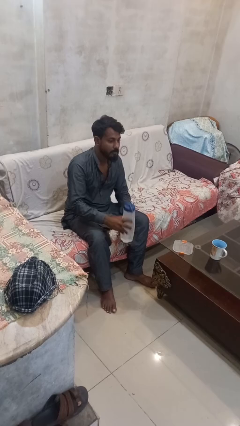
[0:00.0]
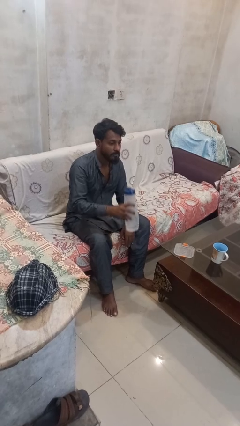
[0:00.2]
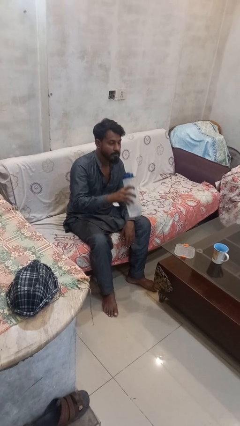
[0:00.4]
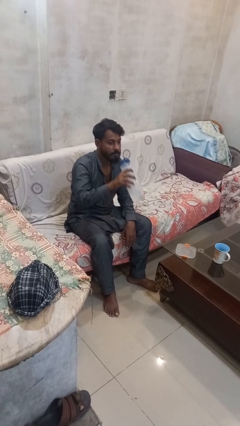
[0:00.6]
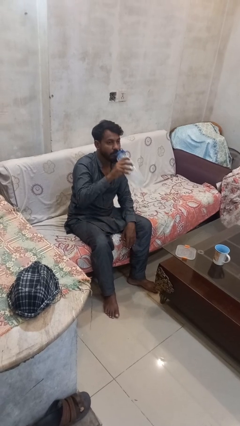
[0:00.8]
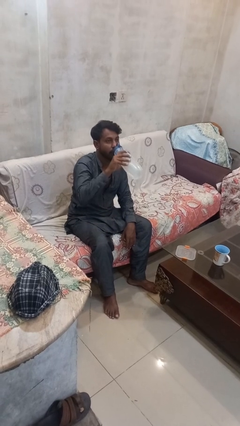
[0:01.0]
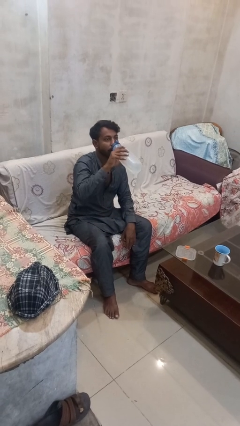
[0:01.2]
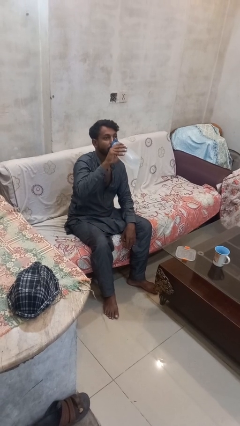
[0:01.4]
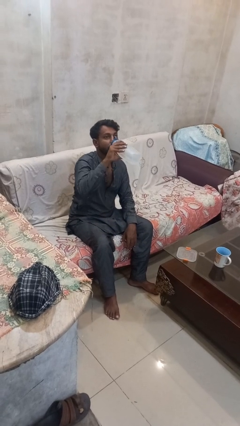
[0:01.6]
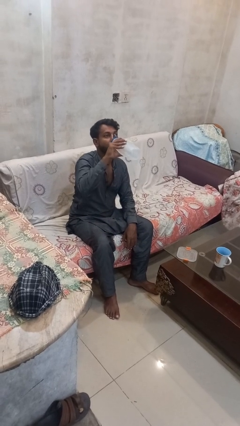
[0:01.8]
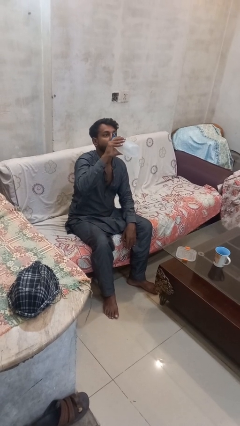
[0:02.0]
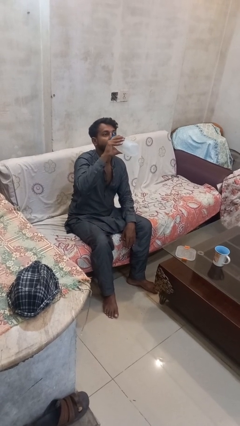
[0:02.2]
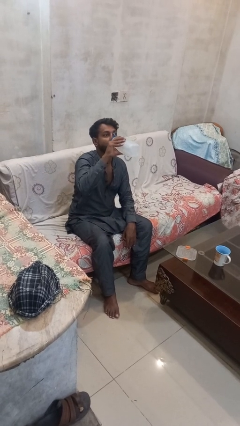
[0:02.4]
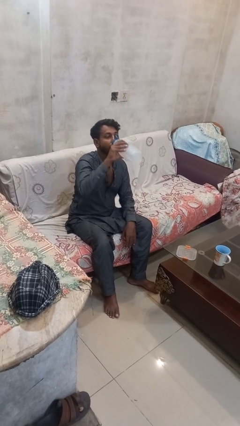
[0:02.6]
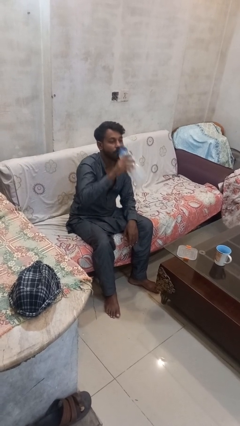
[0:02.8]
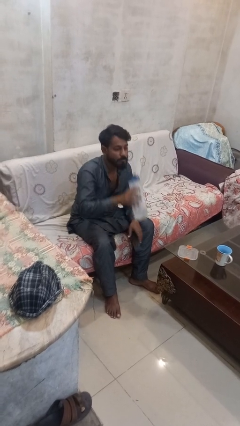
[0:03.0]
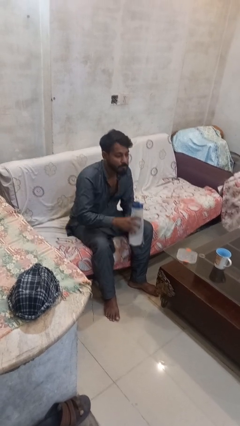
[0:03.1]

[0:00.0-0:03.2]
person drinks from bottle

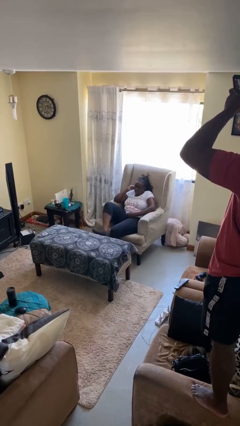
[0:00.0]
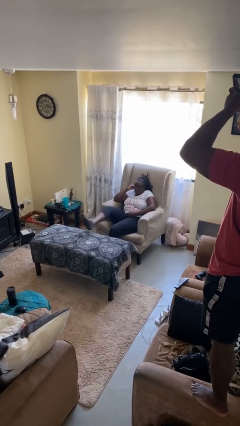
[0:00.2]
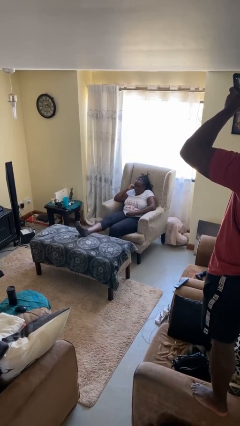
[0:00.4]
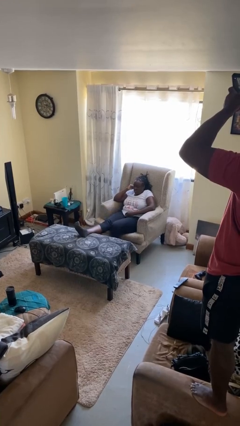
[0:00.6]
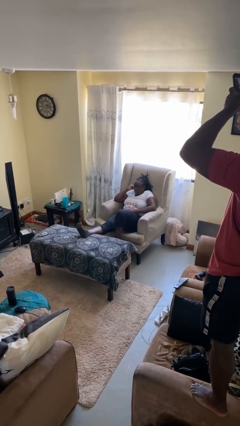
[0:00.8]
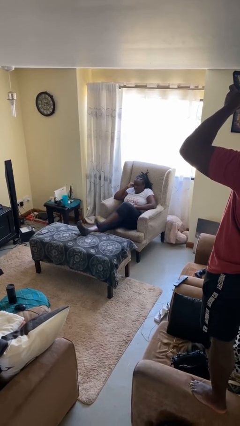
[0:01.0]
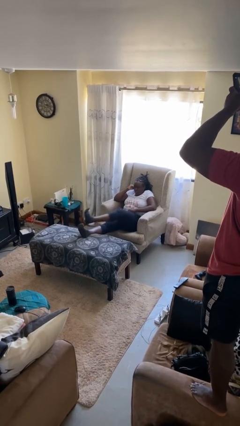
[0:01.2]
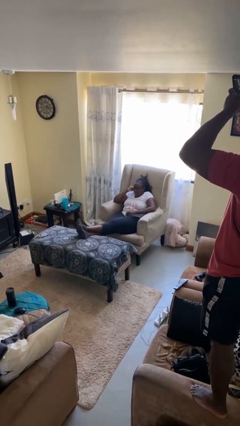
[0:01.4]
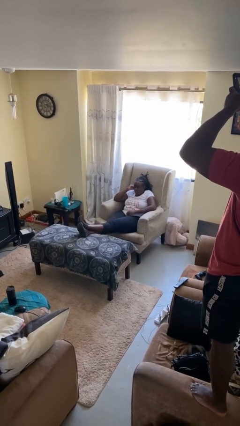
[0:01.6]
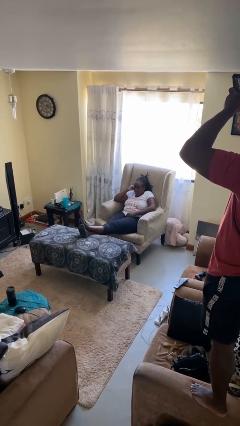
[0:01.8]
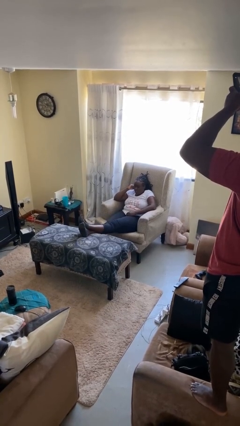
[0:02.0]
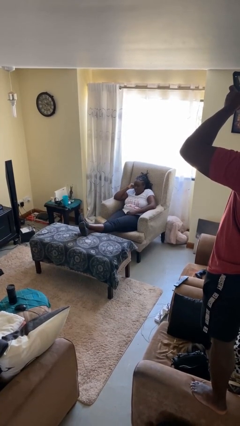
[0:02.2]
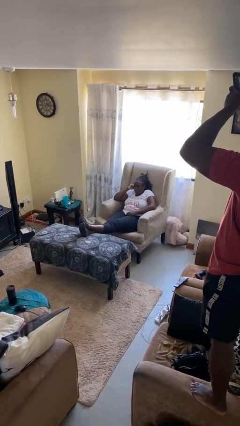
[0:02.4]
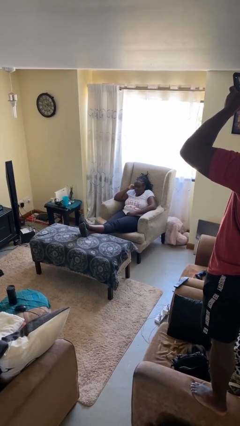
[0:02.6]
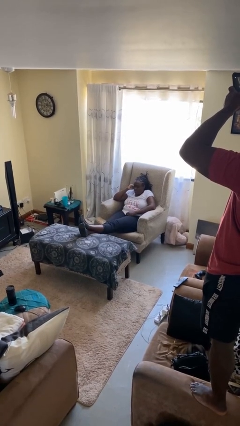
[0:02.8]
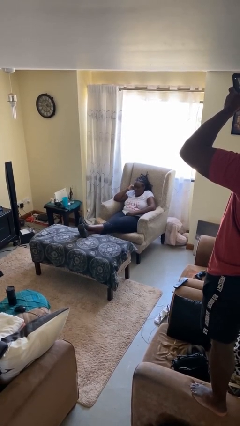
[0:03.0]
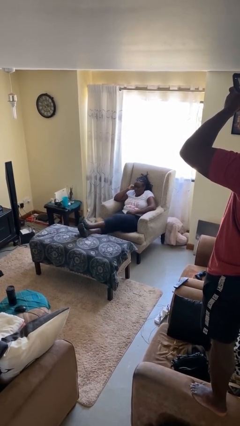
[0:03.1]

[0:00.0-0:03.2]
person puts feet up

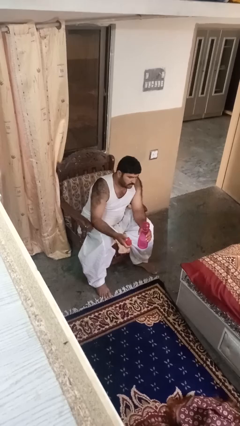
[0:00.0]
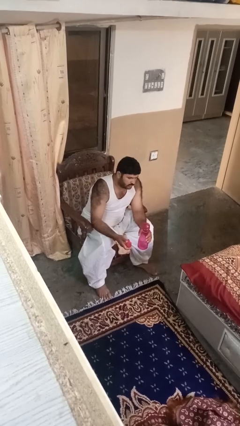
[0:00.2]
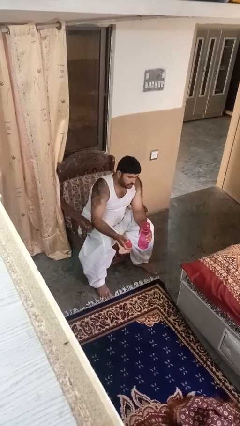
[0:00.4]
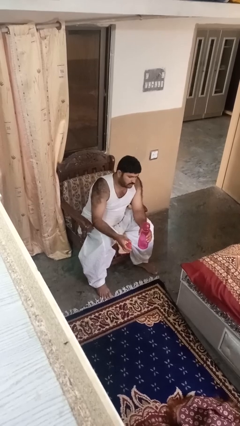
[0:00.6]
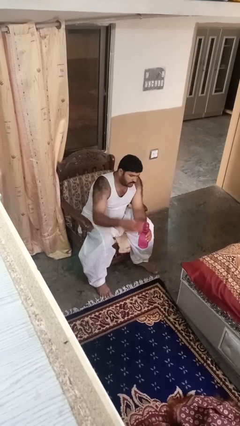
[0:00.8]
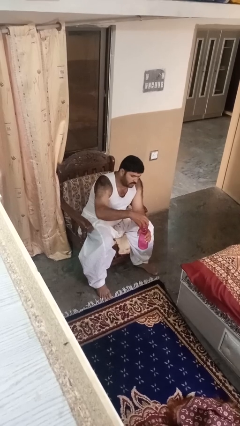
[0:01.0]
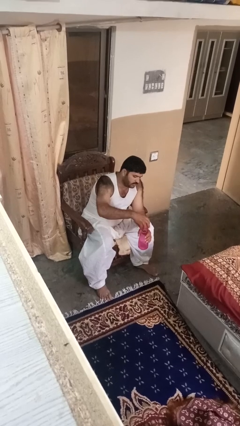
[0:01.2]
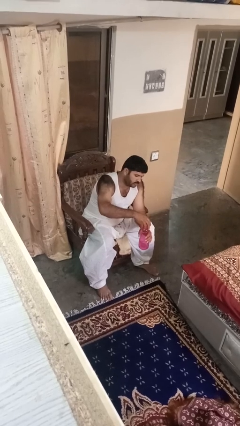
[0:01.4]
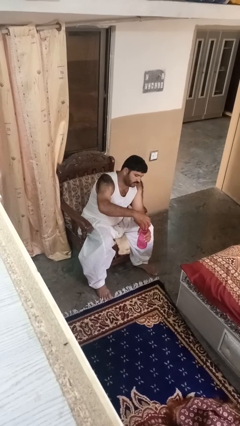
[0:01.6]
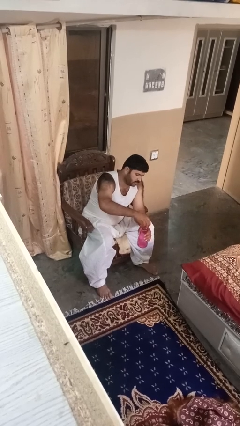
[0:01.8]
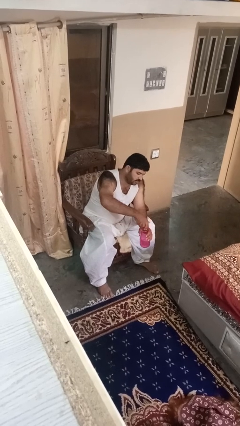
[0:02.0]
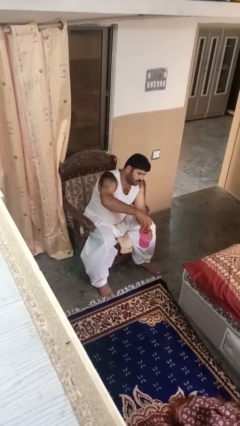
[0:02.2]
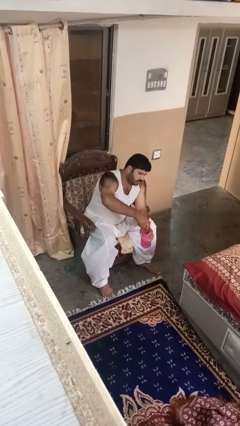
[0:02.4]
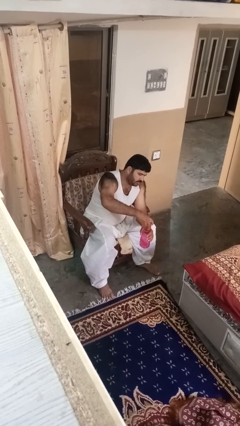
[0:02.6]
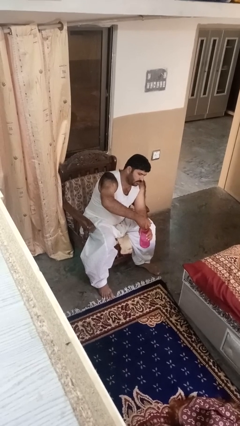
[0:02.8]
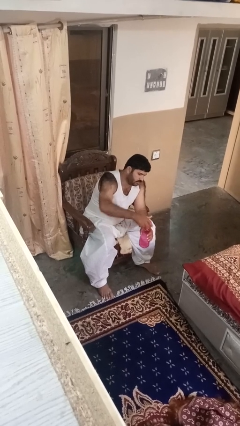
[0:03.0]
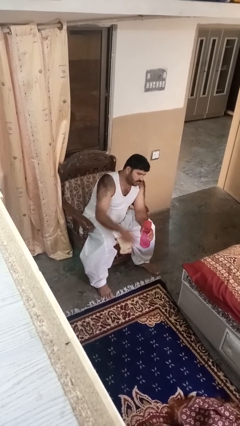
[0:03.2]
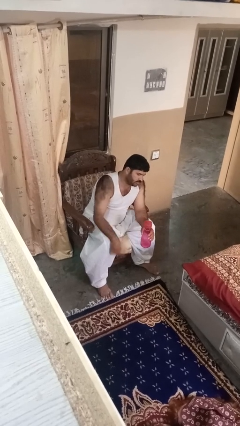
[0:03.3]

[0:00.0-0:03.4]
person screws lid to bottle

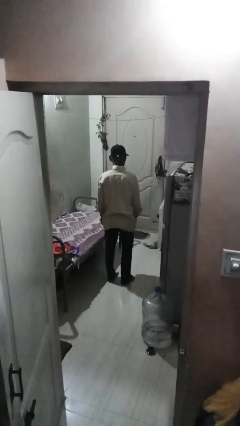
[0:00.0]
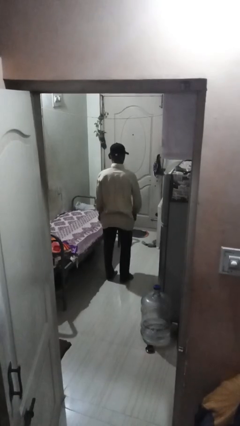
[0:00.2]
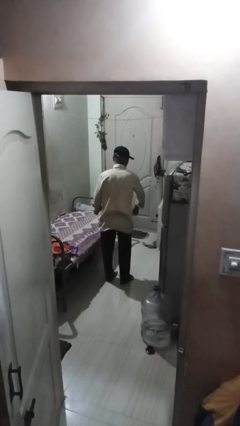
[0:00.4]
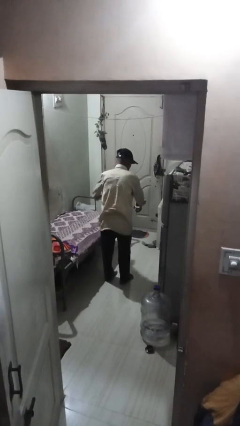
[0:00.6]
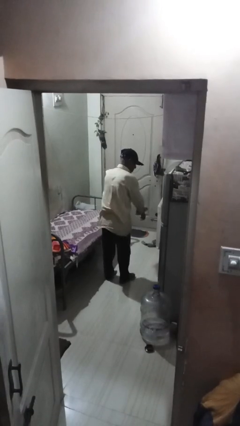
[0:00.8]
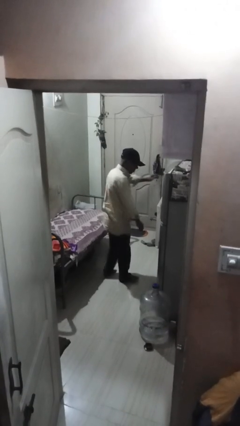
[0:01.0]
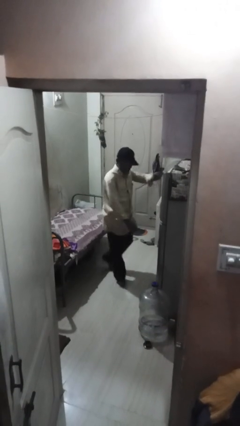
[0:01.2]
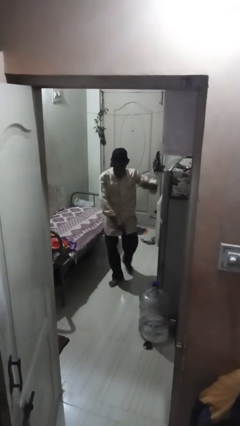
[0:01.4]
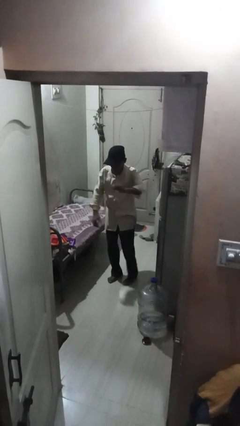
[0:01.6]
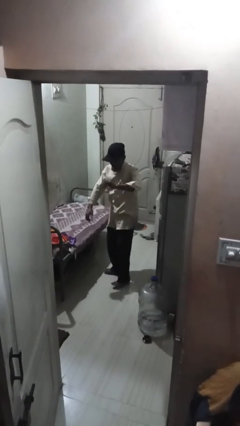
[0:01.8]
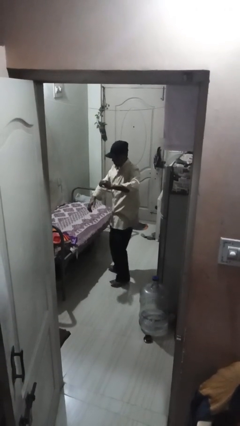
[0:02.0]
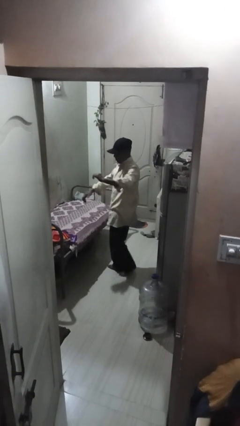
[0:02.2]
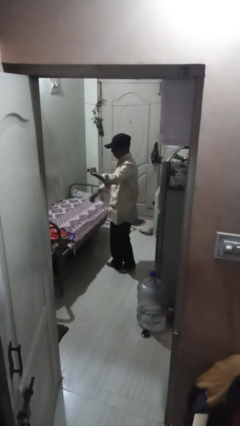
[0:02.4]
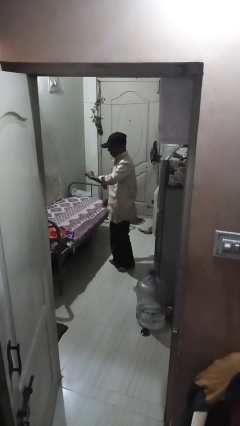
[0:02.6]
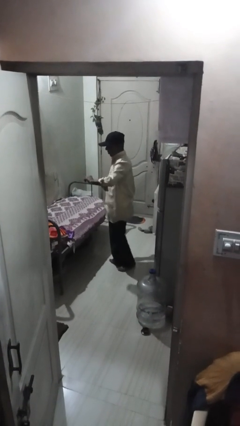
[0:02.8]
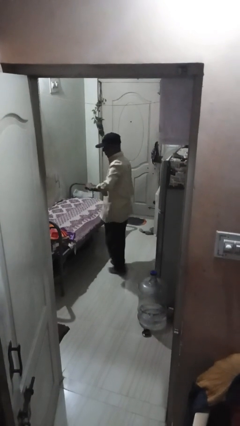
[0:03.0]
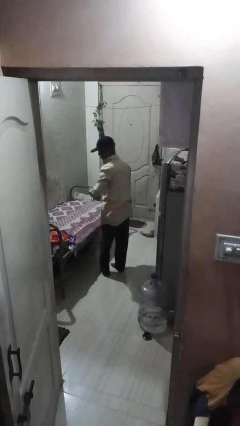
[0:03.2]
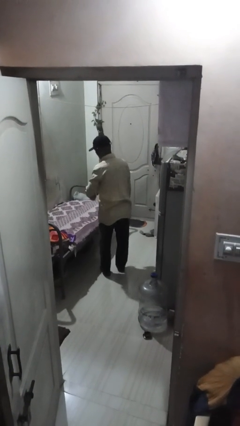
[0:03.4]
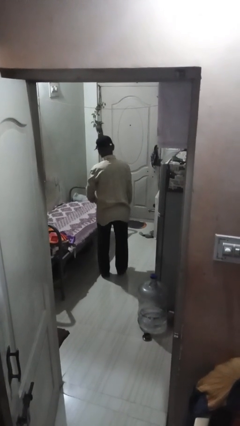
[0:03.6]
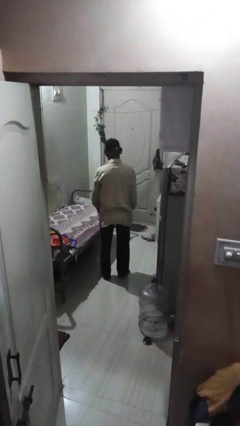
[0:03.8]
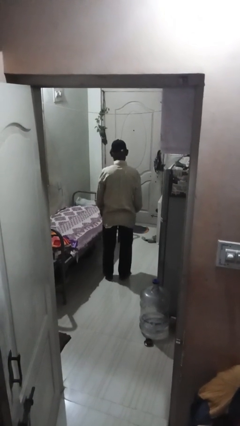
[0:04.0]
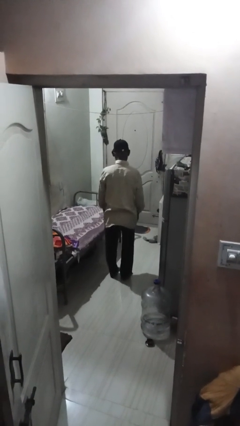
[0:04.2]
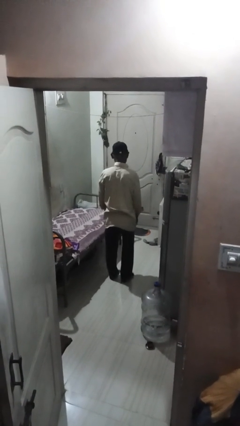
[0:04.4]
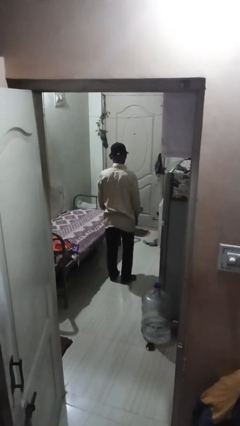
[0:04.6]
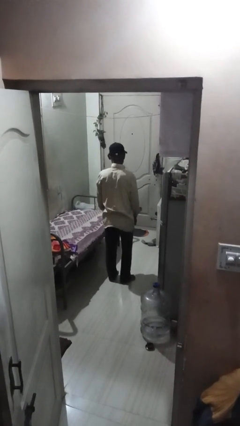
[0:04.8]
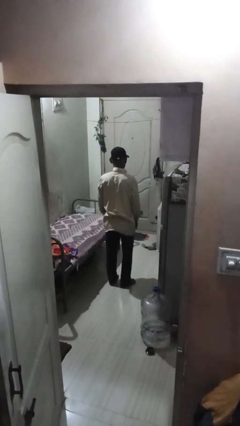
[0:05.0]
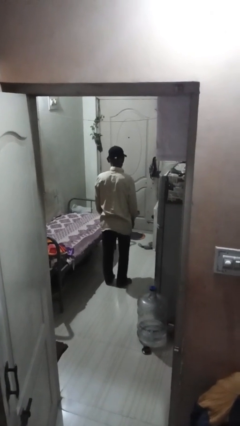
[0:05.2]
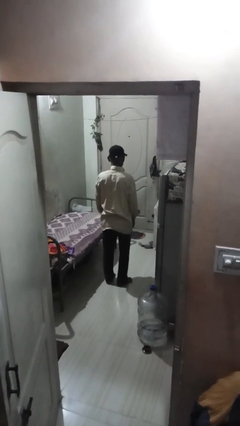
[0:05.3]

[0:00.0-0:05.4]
person twirls

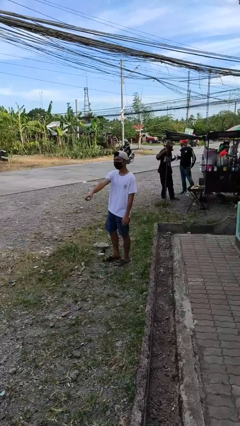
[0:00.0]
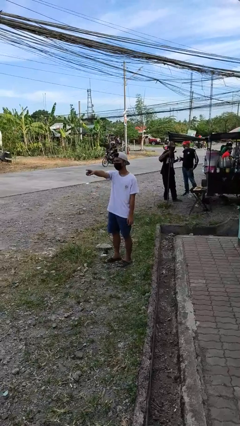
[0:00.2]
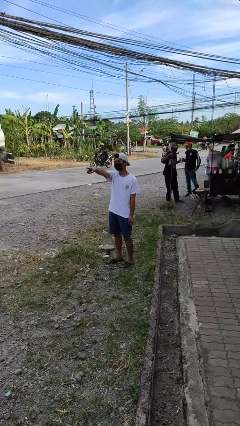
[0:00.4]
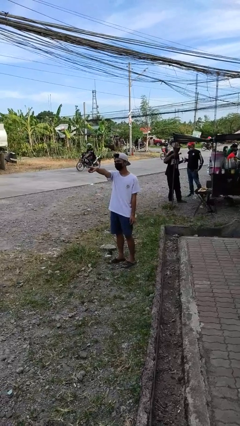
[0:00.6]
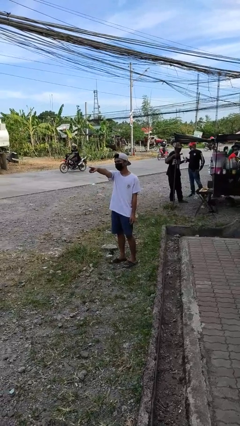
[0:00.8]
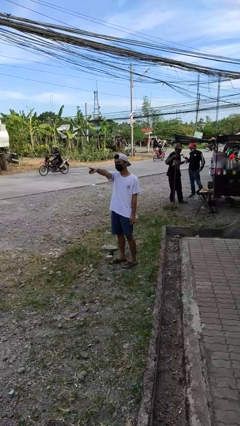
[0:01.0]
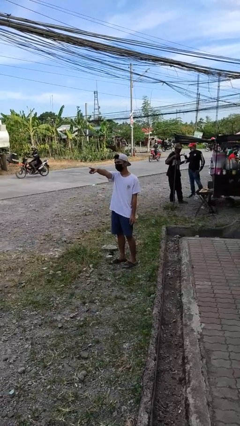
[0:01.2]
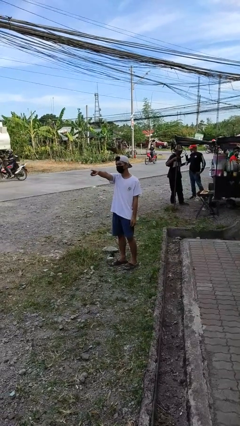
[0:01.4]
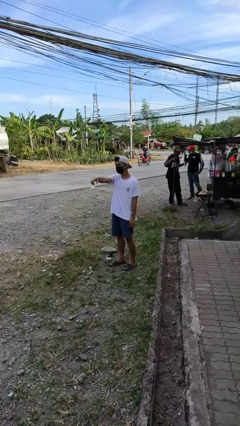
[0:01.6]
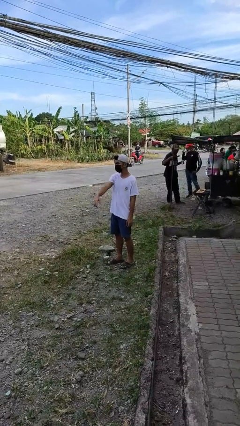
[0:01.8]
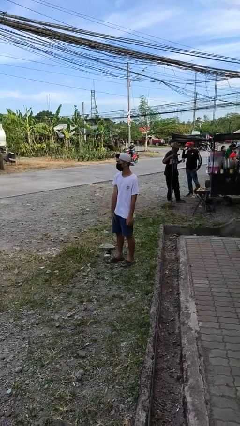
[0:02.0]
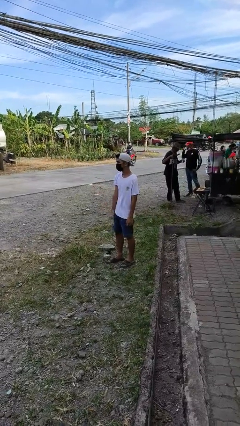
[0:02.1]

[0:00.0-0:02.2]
person points at person

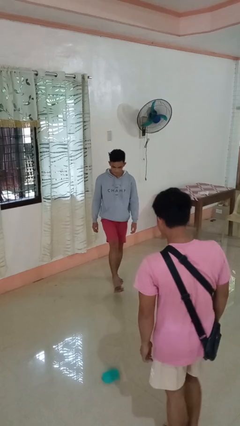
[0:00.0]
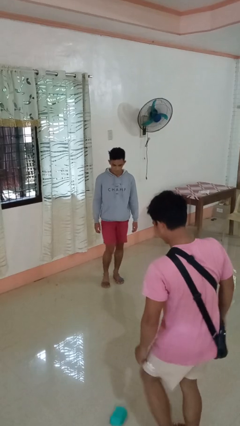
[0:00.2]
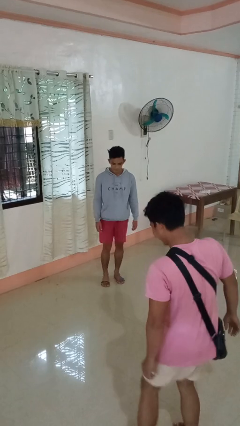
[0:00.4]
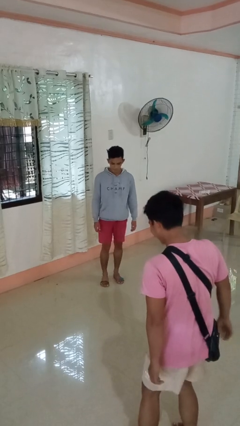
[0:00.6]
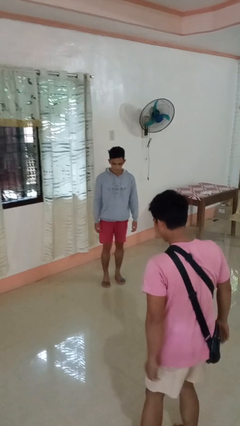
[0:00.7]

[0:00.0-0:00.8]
person kicks object to person
